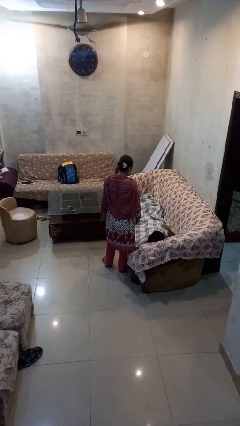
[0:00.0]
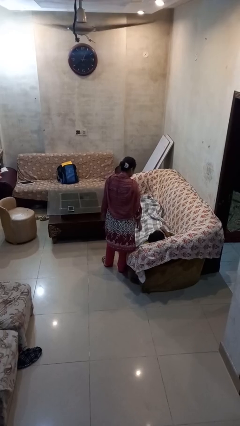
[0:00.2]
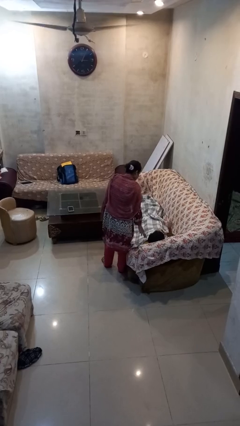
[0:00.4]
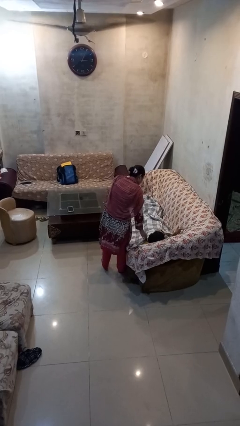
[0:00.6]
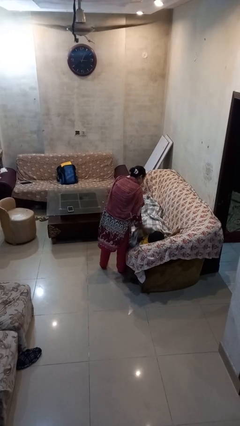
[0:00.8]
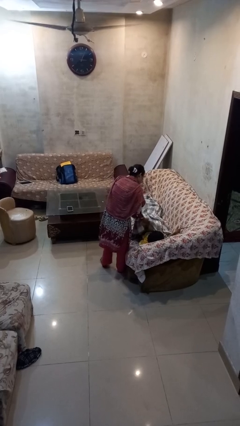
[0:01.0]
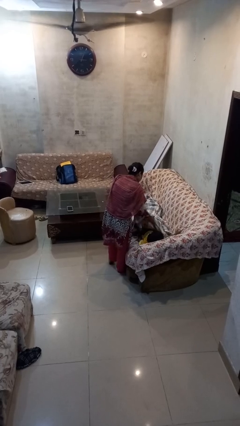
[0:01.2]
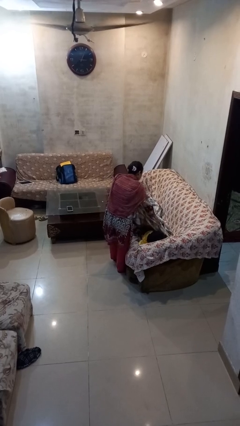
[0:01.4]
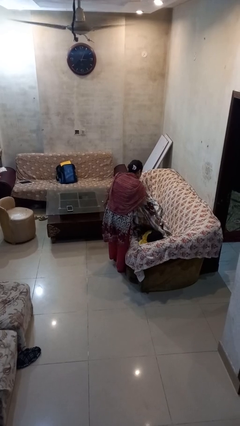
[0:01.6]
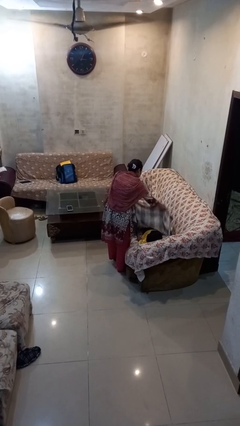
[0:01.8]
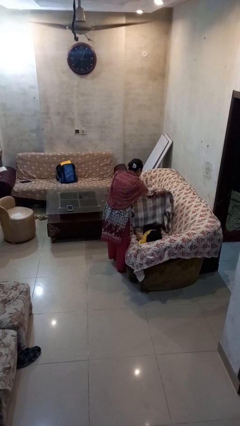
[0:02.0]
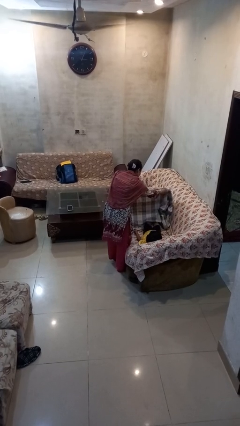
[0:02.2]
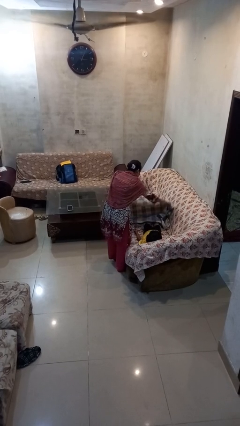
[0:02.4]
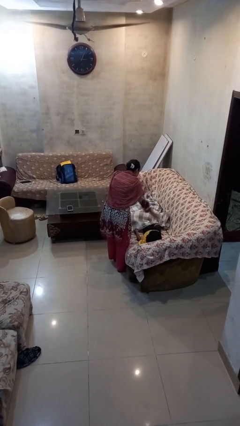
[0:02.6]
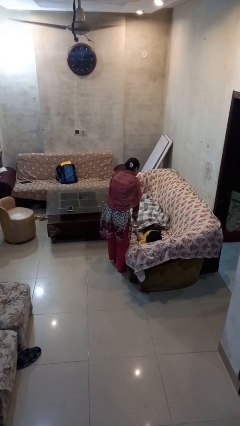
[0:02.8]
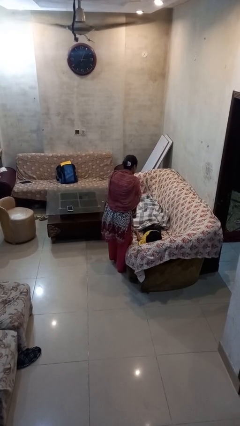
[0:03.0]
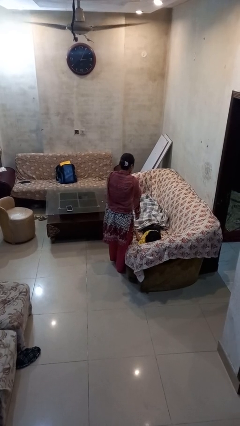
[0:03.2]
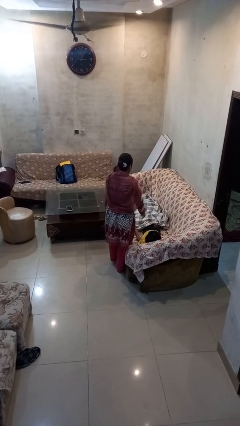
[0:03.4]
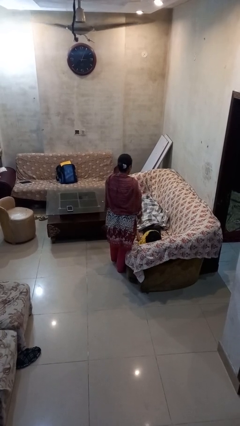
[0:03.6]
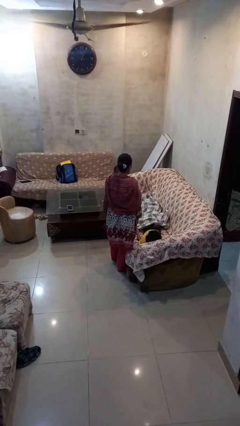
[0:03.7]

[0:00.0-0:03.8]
person uncovers friend with blanket

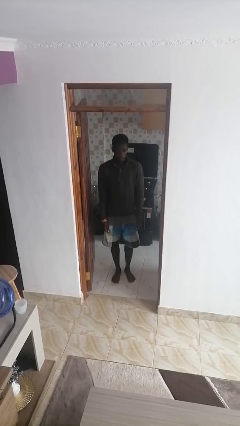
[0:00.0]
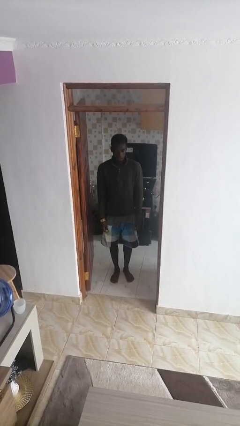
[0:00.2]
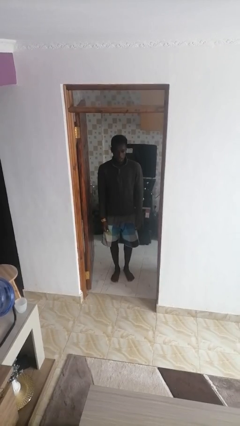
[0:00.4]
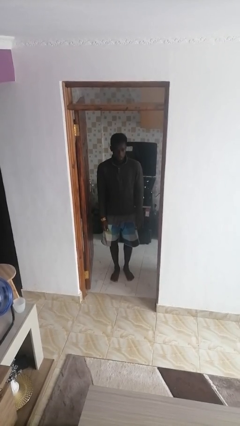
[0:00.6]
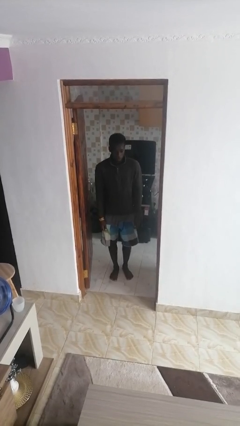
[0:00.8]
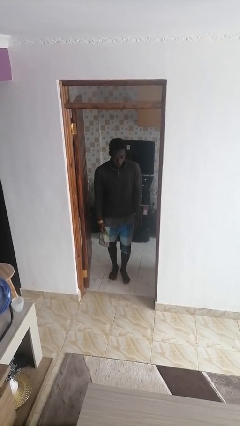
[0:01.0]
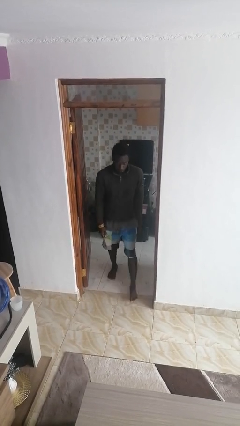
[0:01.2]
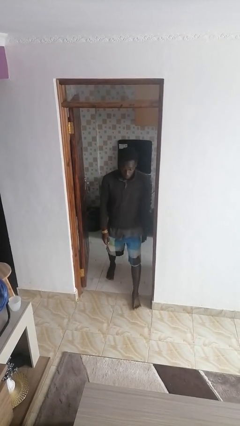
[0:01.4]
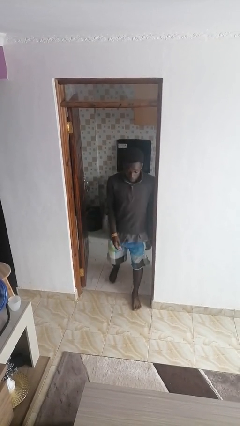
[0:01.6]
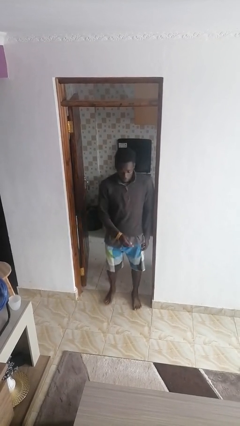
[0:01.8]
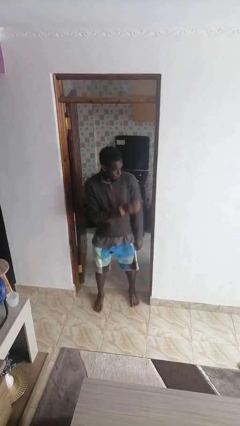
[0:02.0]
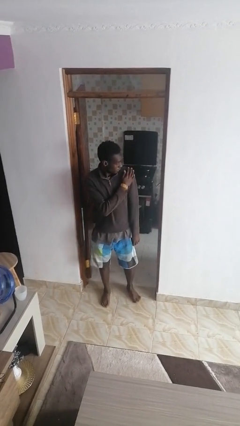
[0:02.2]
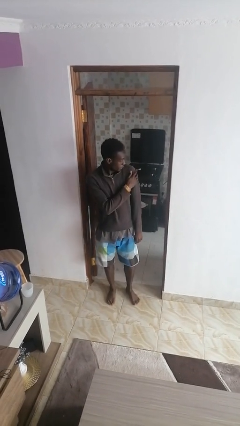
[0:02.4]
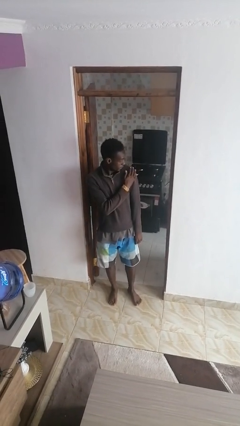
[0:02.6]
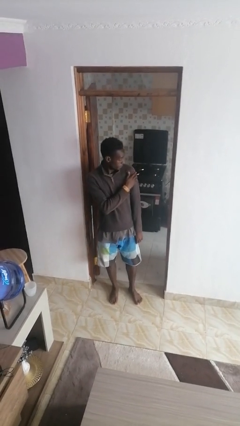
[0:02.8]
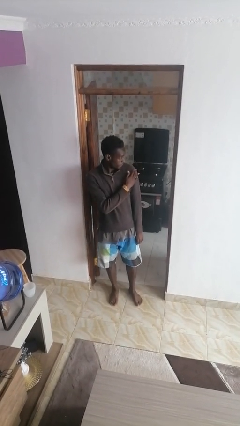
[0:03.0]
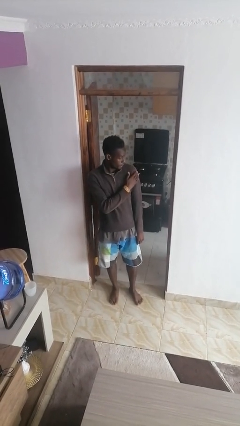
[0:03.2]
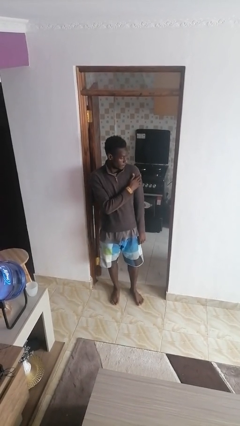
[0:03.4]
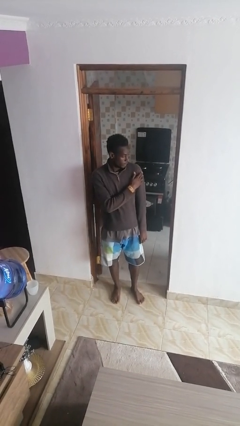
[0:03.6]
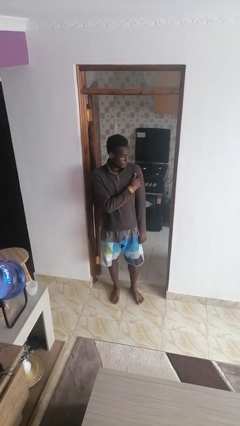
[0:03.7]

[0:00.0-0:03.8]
person bumps into wall

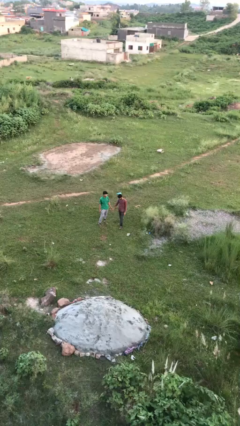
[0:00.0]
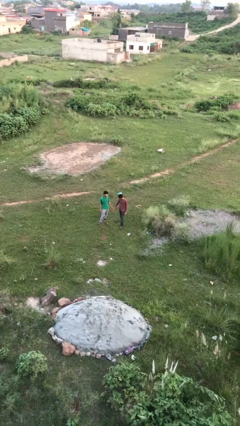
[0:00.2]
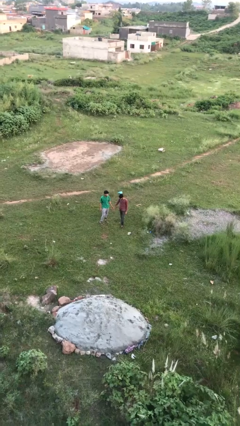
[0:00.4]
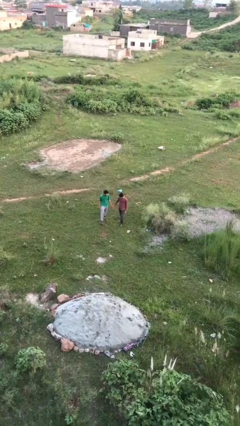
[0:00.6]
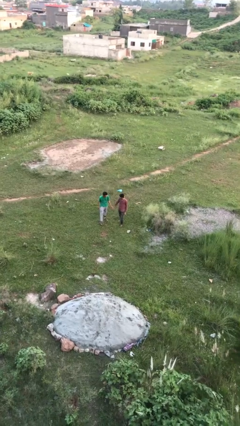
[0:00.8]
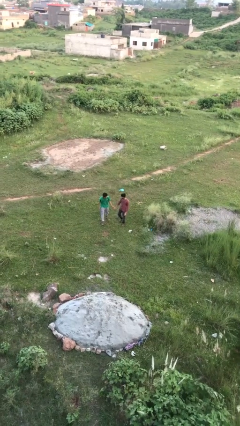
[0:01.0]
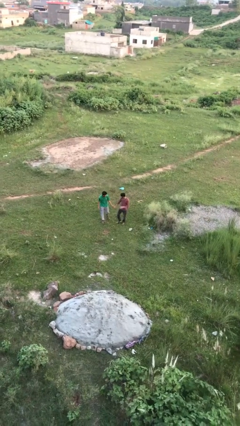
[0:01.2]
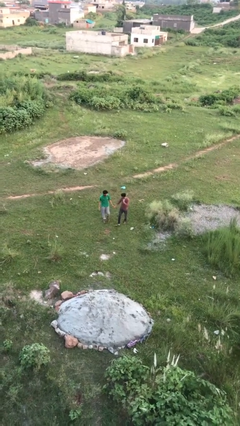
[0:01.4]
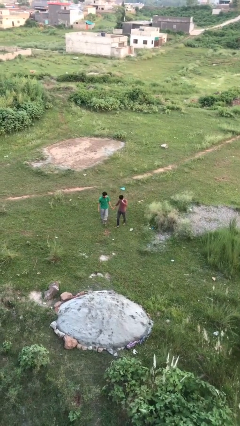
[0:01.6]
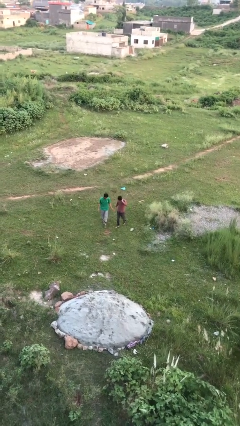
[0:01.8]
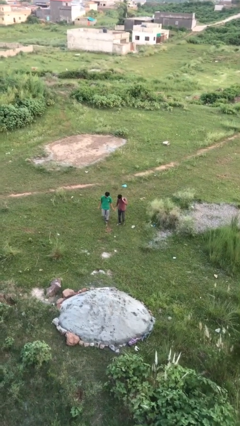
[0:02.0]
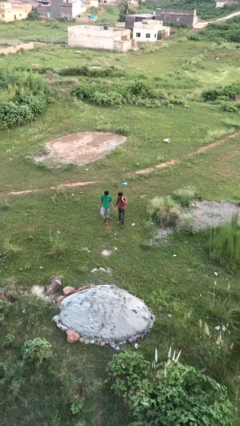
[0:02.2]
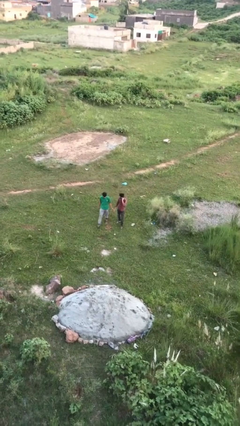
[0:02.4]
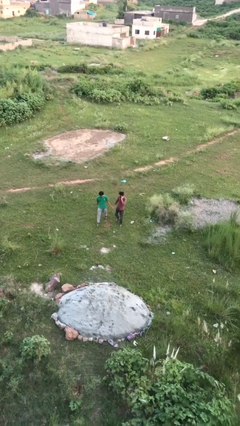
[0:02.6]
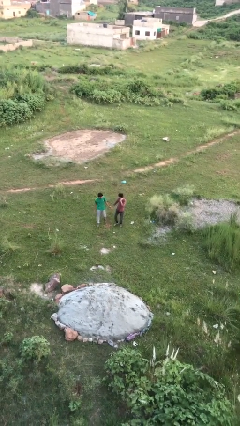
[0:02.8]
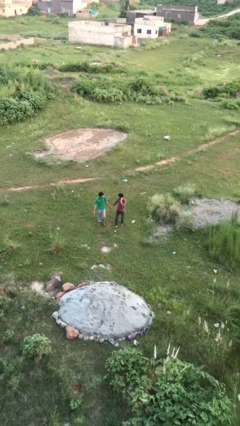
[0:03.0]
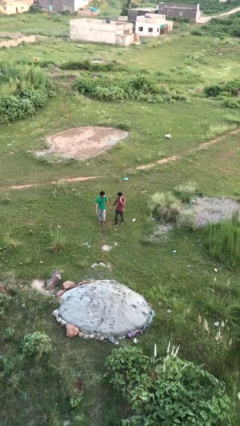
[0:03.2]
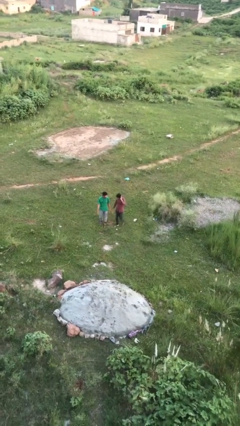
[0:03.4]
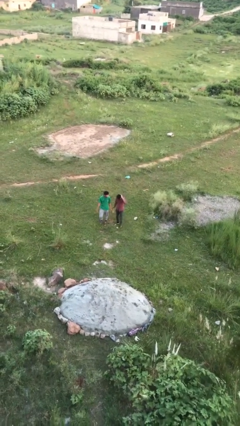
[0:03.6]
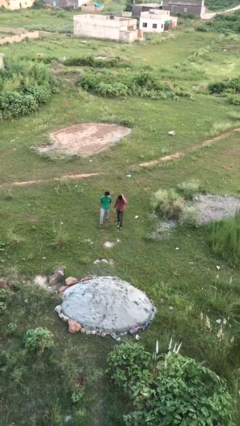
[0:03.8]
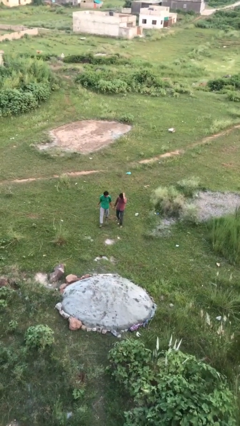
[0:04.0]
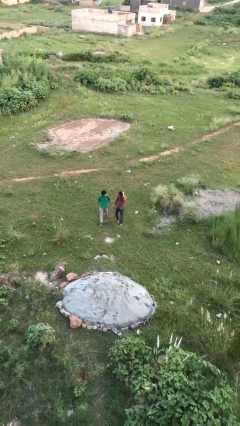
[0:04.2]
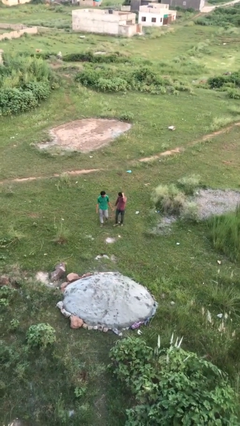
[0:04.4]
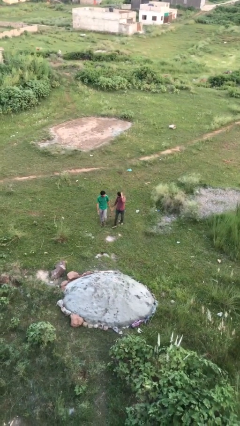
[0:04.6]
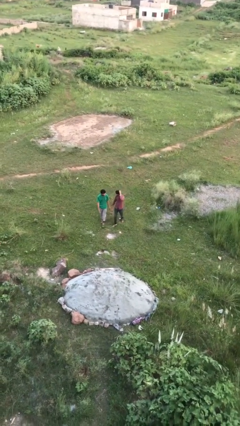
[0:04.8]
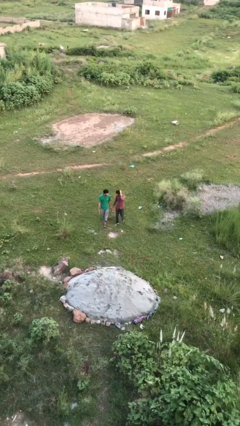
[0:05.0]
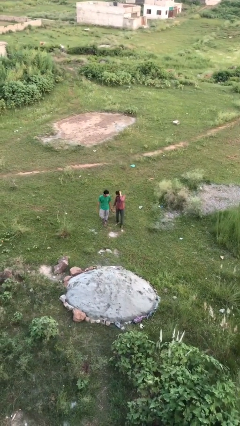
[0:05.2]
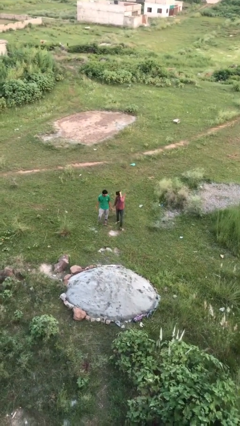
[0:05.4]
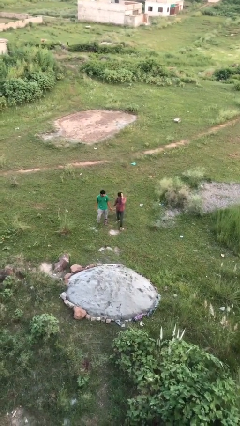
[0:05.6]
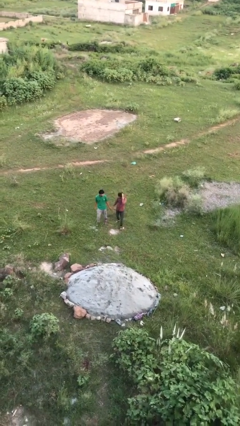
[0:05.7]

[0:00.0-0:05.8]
person holds hand

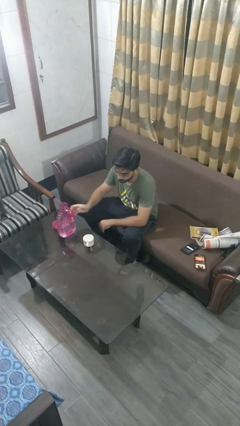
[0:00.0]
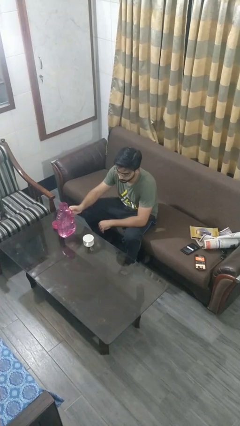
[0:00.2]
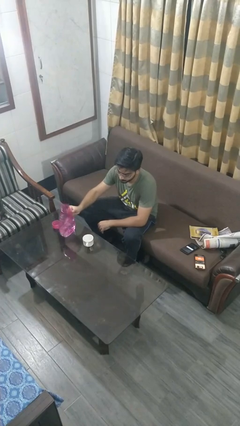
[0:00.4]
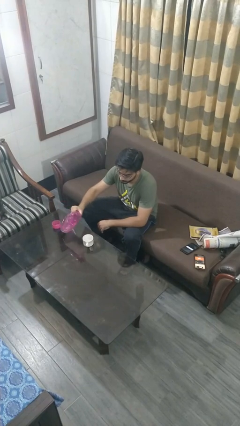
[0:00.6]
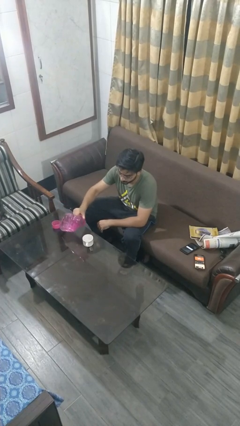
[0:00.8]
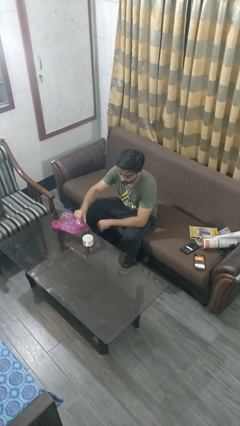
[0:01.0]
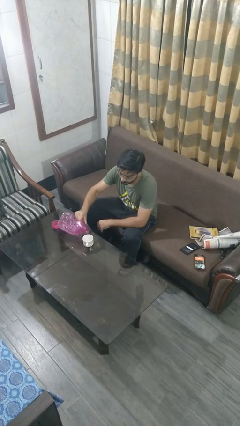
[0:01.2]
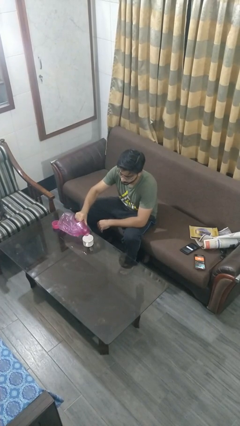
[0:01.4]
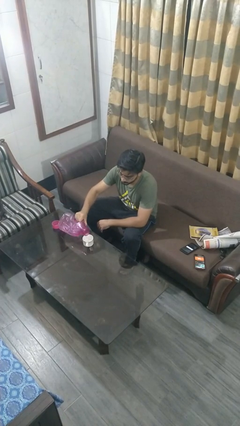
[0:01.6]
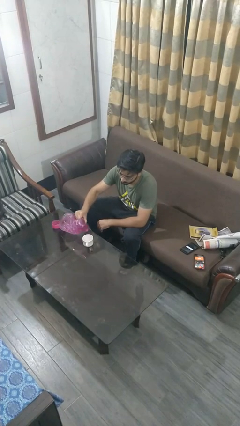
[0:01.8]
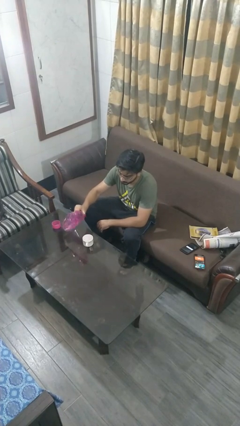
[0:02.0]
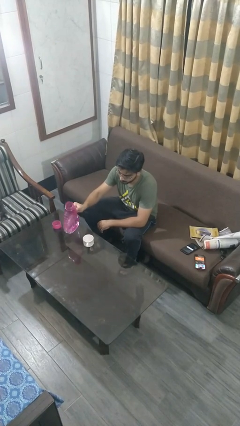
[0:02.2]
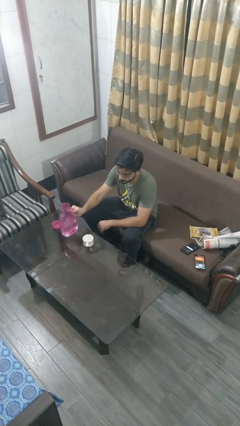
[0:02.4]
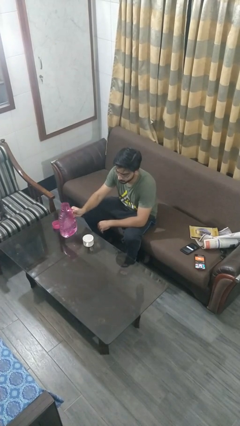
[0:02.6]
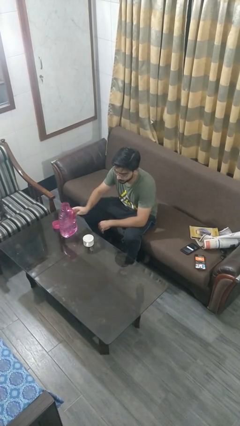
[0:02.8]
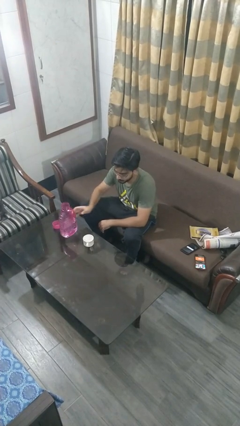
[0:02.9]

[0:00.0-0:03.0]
person pours liquid into cup

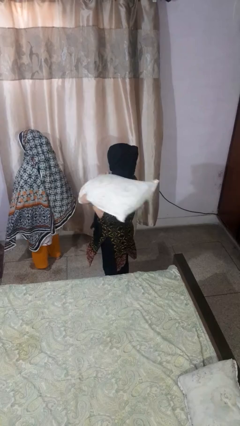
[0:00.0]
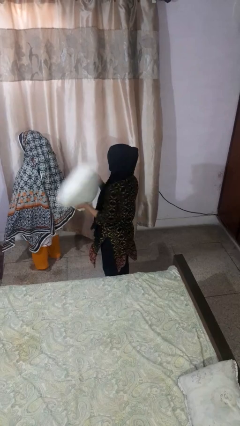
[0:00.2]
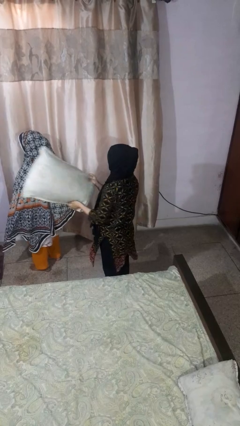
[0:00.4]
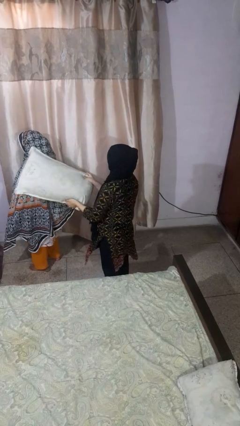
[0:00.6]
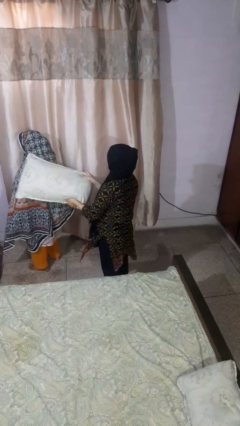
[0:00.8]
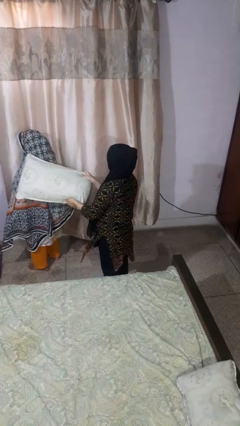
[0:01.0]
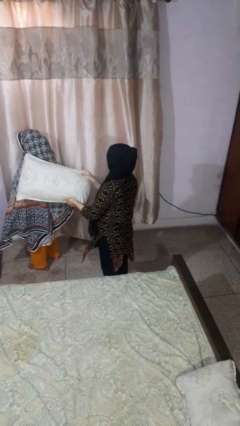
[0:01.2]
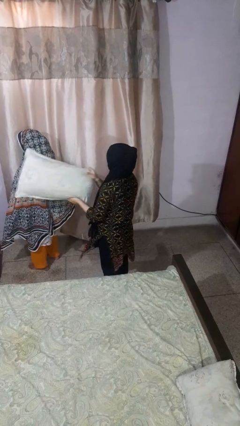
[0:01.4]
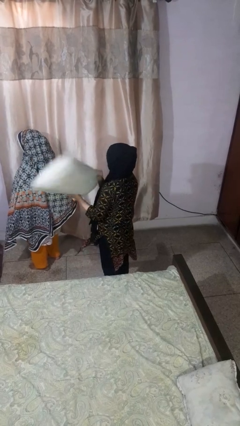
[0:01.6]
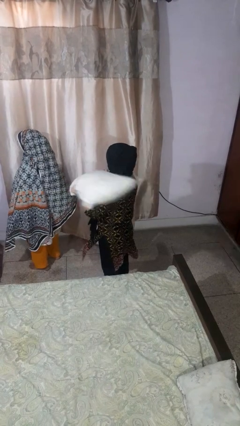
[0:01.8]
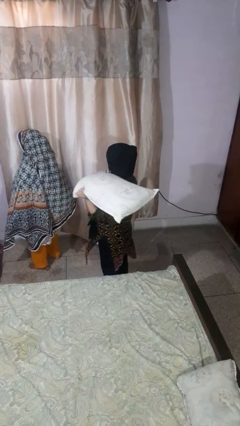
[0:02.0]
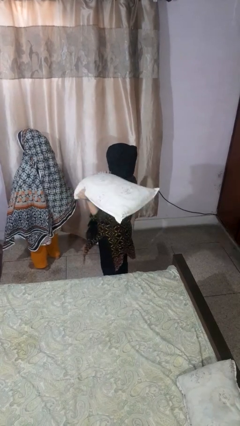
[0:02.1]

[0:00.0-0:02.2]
person hits person with pillow
